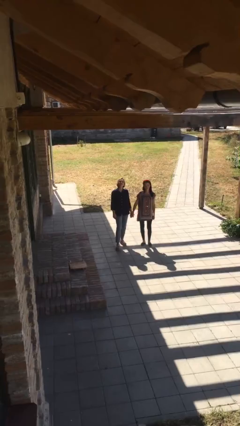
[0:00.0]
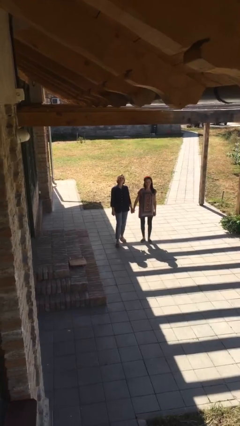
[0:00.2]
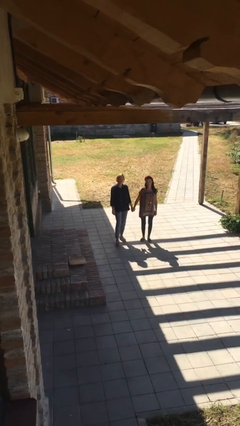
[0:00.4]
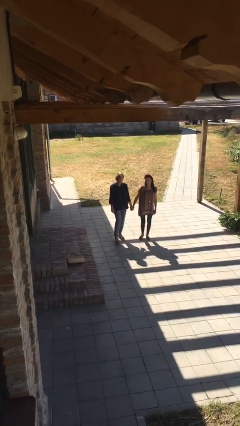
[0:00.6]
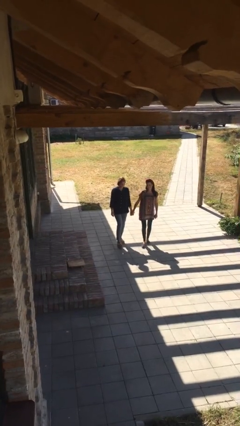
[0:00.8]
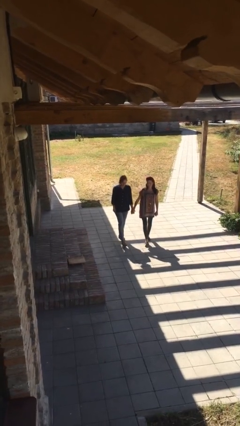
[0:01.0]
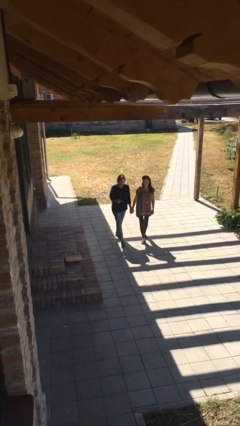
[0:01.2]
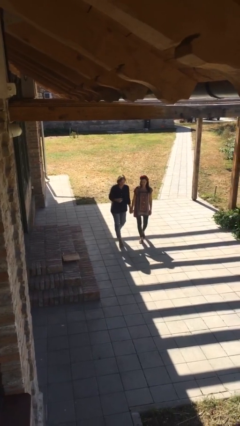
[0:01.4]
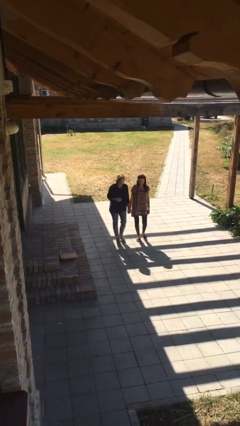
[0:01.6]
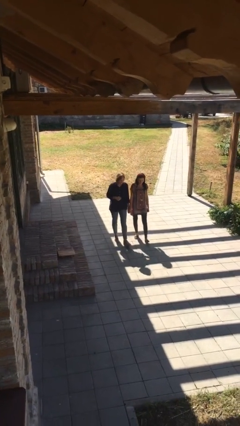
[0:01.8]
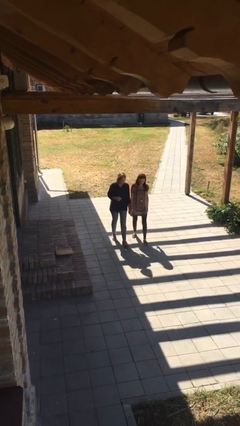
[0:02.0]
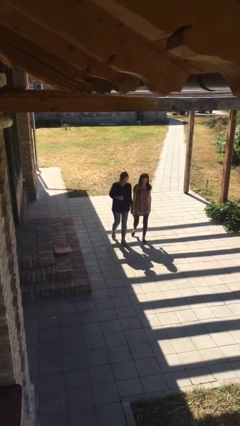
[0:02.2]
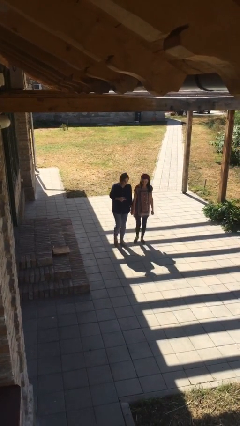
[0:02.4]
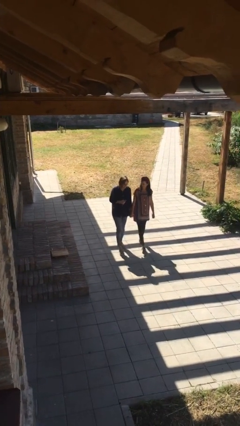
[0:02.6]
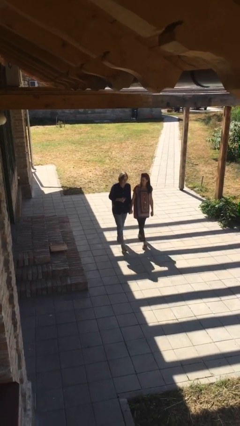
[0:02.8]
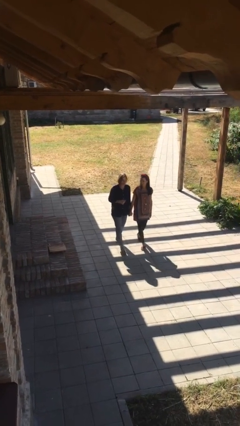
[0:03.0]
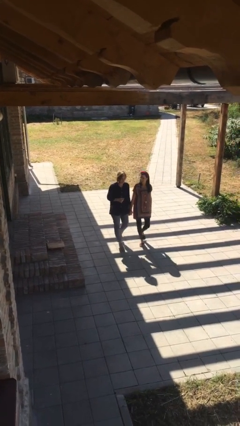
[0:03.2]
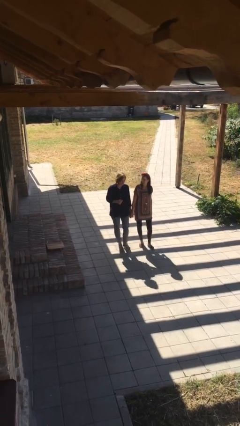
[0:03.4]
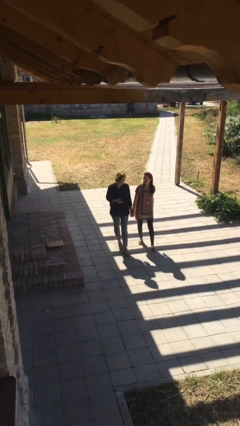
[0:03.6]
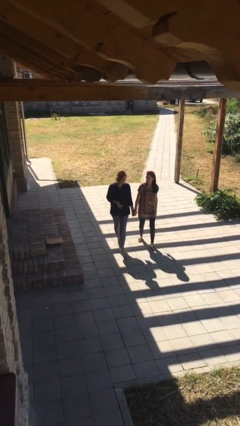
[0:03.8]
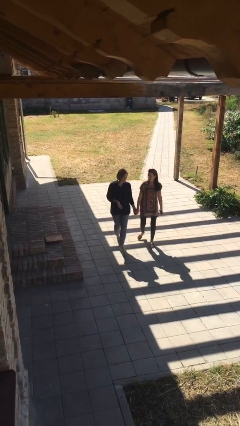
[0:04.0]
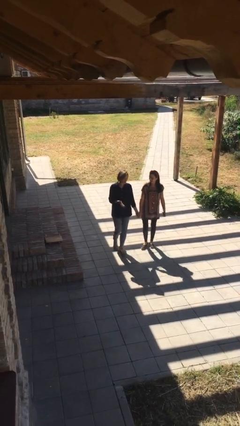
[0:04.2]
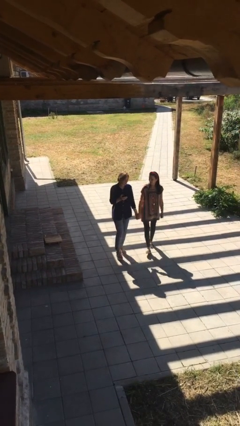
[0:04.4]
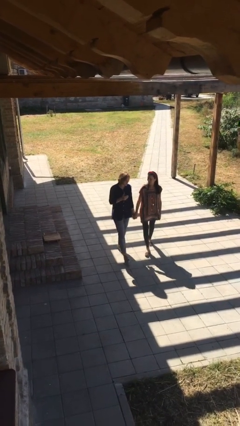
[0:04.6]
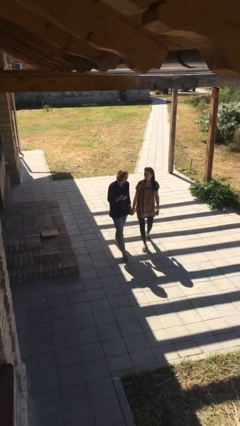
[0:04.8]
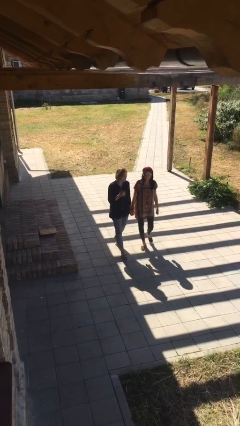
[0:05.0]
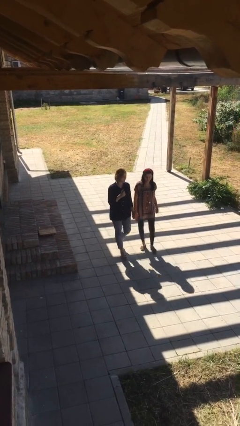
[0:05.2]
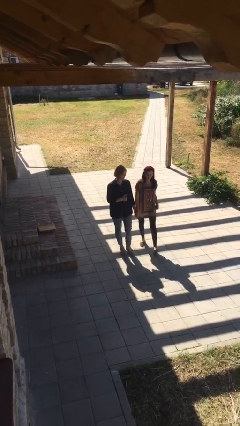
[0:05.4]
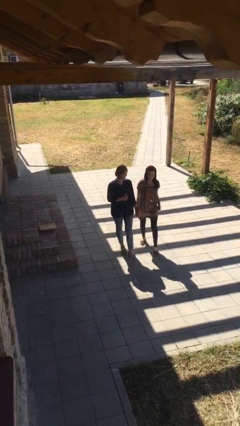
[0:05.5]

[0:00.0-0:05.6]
person holds hand

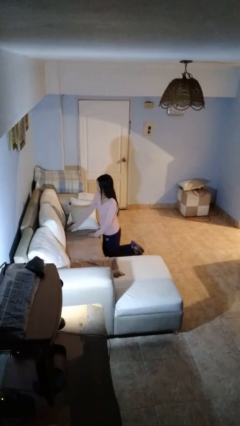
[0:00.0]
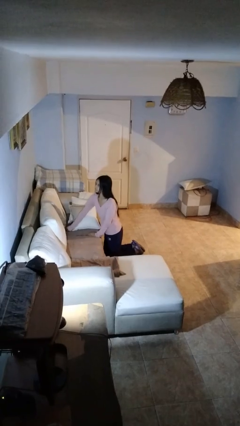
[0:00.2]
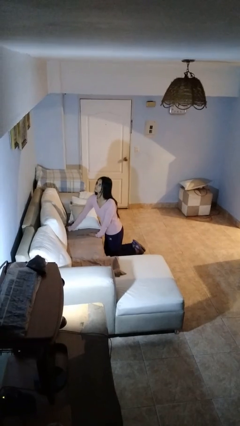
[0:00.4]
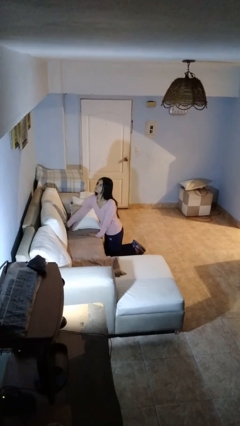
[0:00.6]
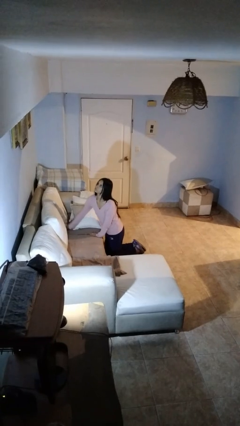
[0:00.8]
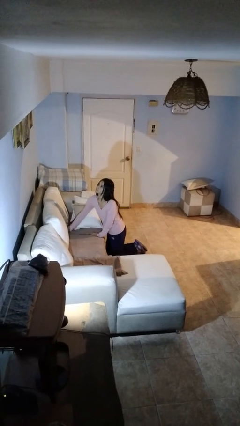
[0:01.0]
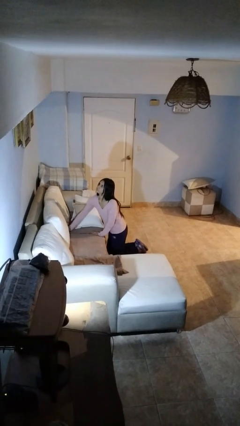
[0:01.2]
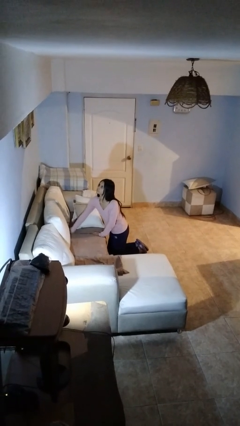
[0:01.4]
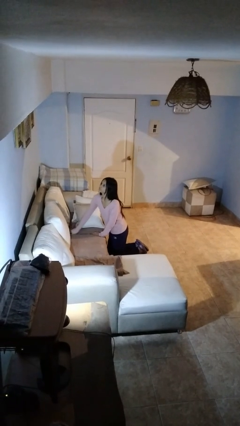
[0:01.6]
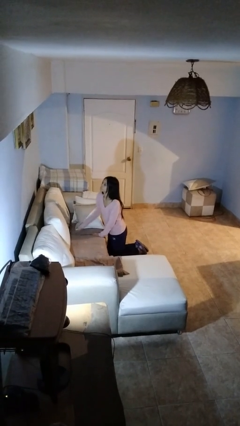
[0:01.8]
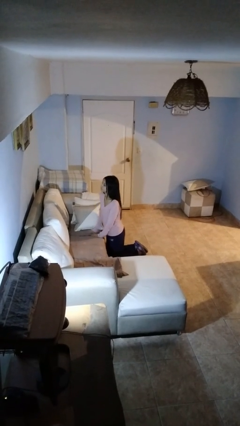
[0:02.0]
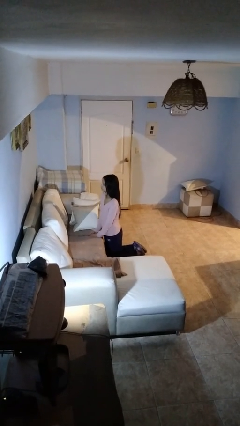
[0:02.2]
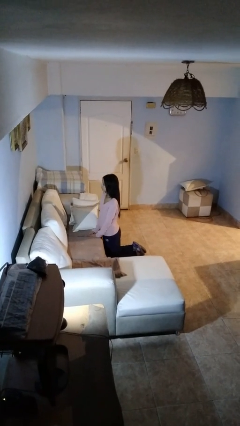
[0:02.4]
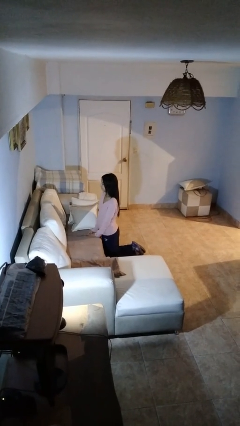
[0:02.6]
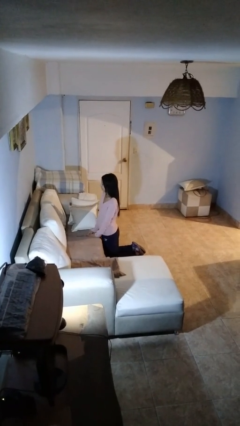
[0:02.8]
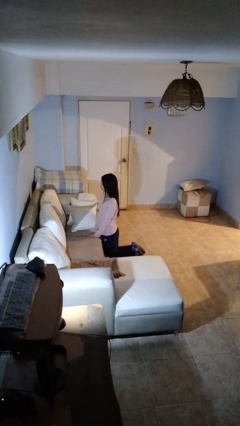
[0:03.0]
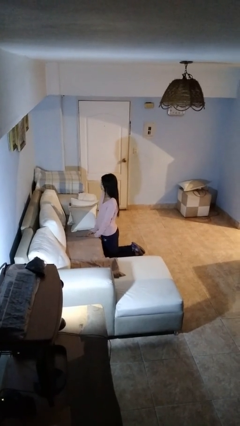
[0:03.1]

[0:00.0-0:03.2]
person searches in couch

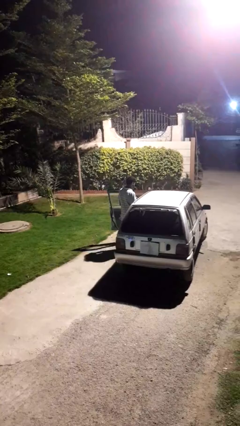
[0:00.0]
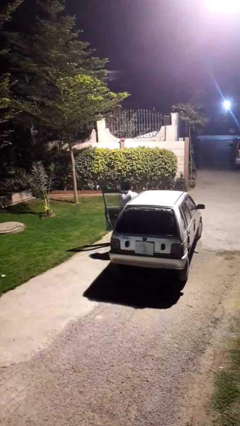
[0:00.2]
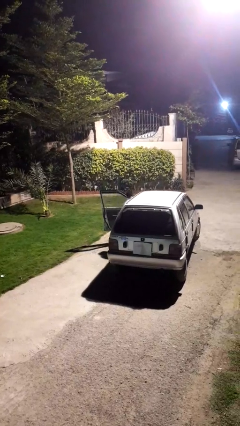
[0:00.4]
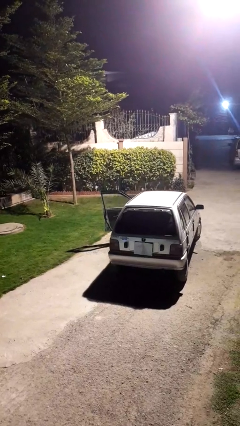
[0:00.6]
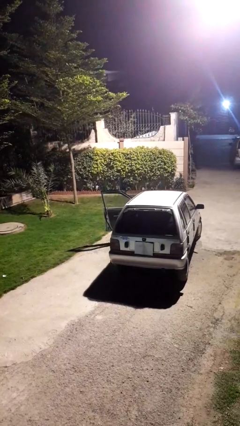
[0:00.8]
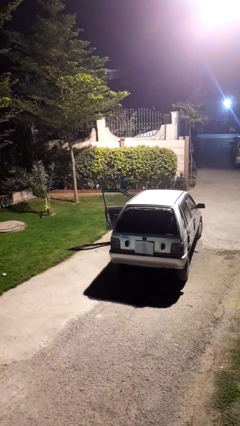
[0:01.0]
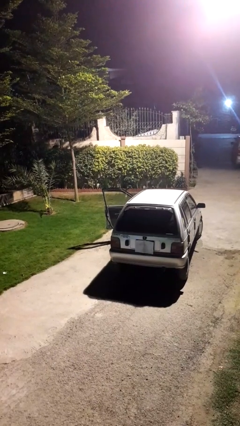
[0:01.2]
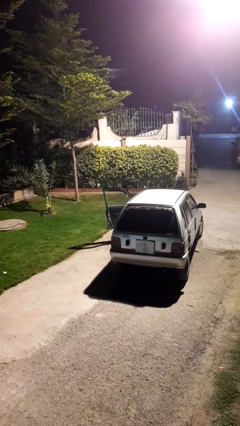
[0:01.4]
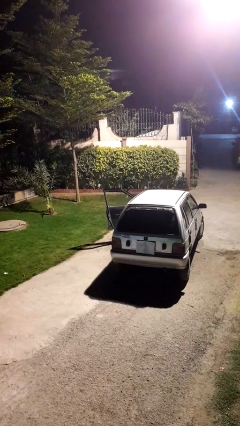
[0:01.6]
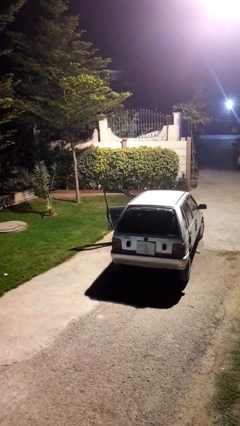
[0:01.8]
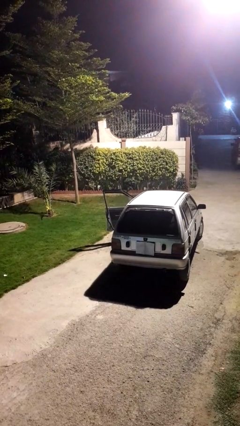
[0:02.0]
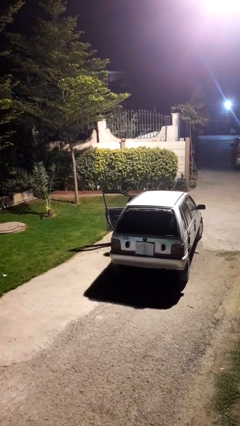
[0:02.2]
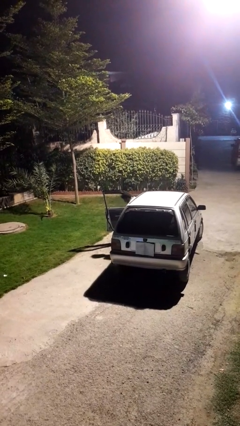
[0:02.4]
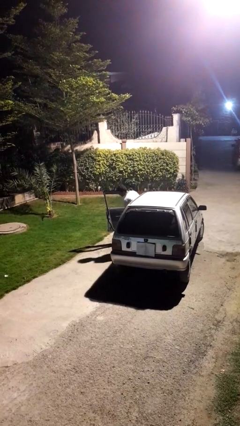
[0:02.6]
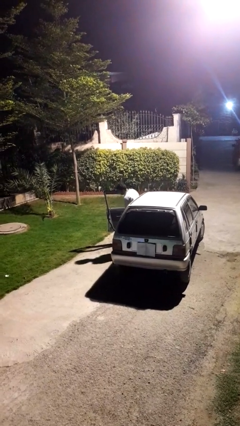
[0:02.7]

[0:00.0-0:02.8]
person enters car

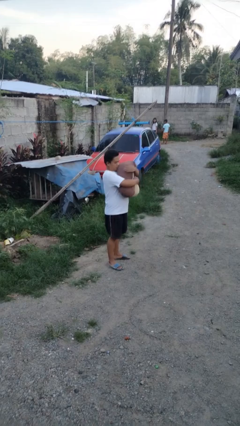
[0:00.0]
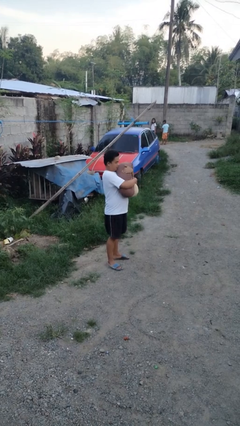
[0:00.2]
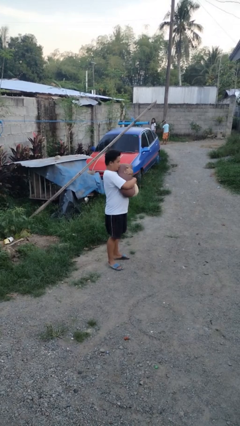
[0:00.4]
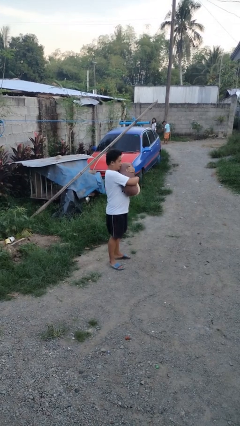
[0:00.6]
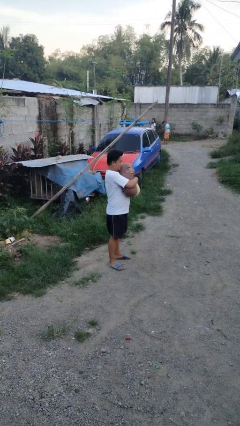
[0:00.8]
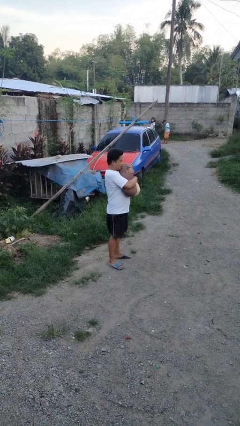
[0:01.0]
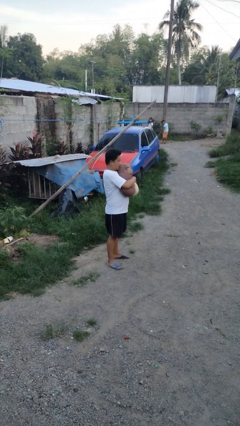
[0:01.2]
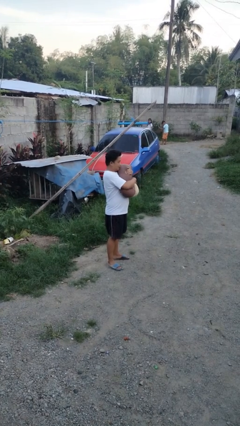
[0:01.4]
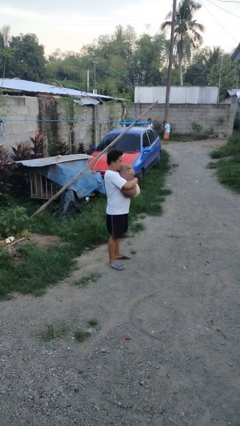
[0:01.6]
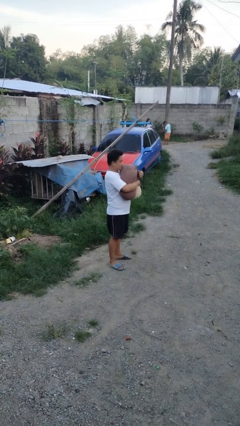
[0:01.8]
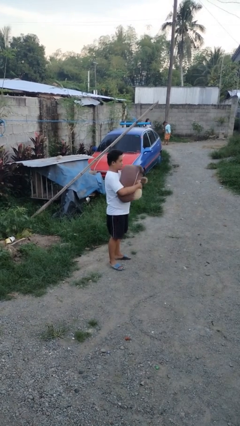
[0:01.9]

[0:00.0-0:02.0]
person squeezes object

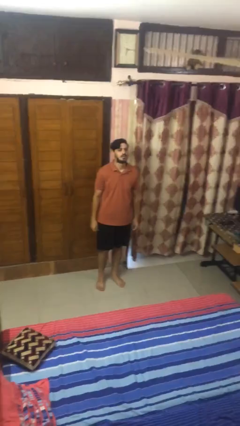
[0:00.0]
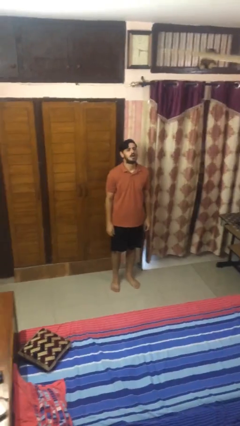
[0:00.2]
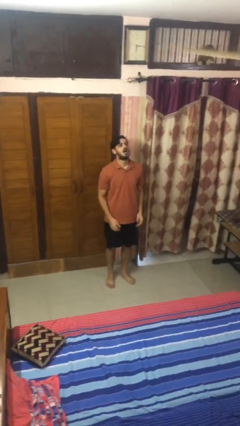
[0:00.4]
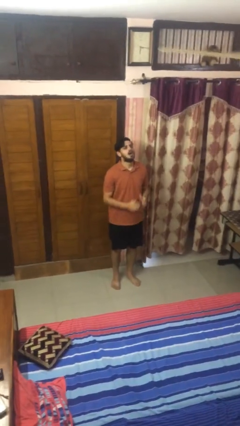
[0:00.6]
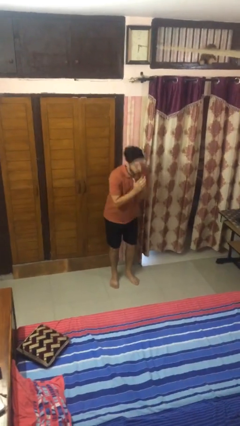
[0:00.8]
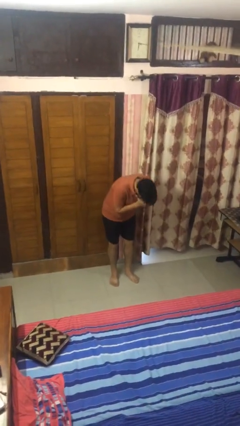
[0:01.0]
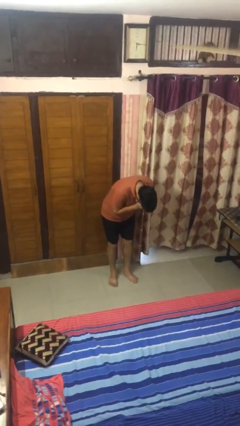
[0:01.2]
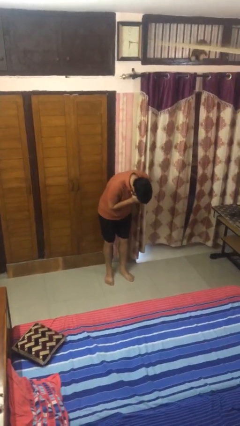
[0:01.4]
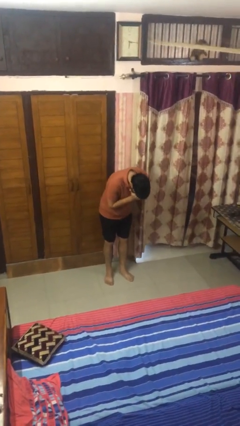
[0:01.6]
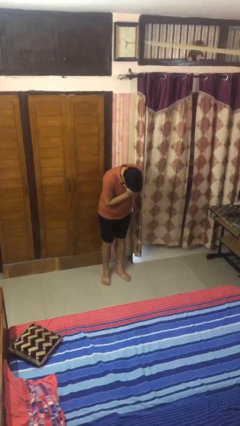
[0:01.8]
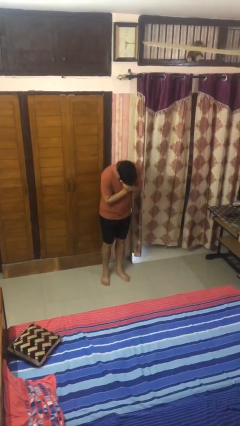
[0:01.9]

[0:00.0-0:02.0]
person sneezes into hand

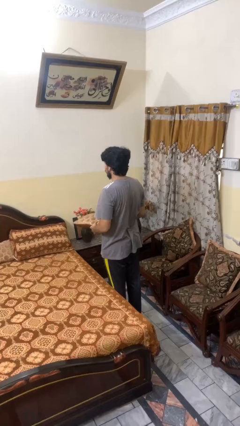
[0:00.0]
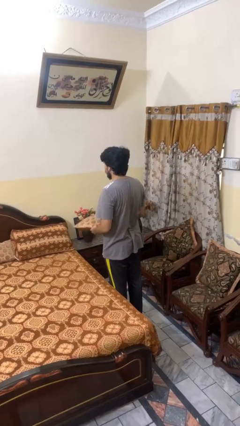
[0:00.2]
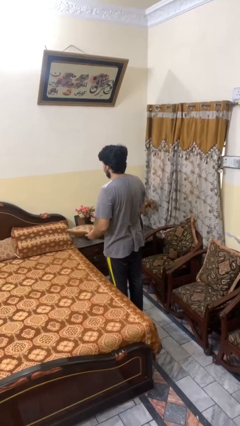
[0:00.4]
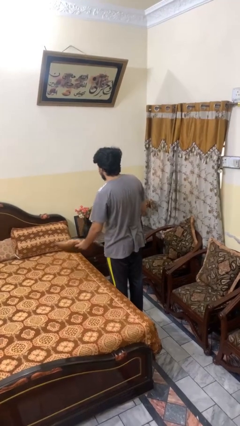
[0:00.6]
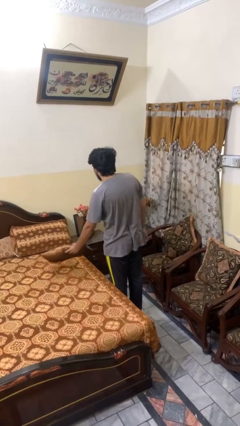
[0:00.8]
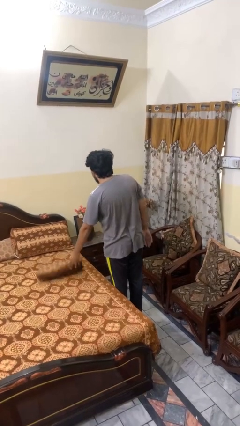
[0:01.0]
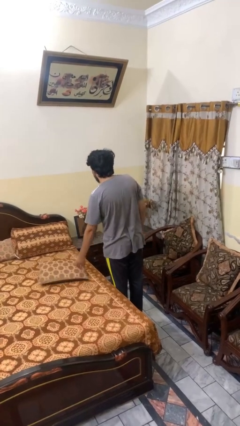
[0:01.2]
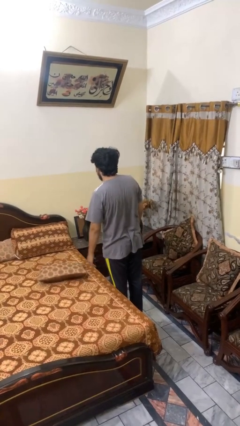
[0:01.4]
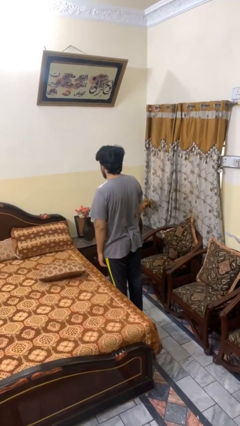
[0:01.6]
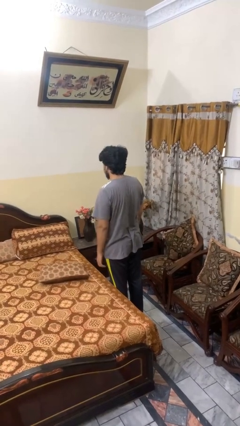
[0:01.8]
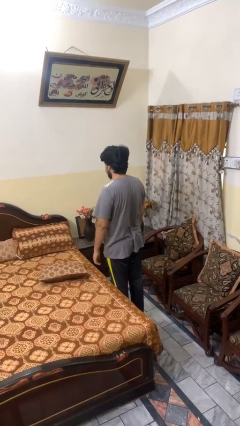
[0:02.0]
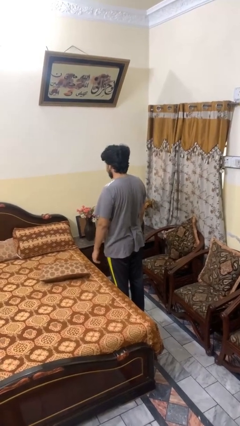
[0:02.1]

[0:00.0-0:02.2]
person puts down object on bed
